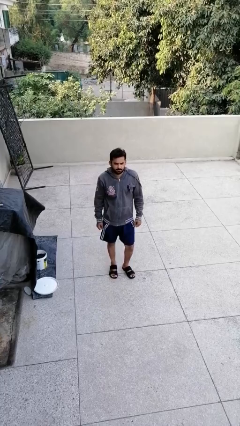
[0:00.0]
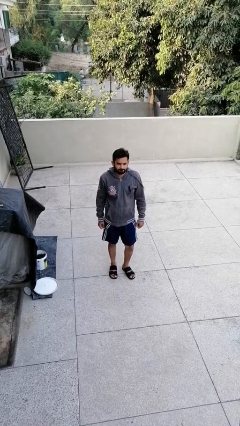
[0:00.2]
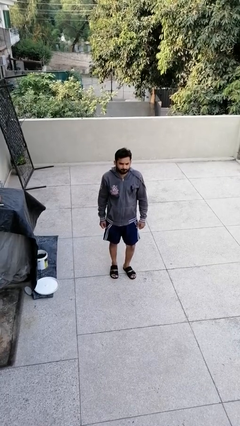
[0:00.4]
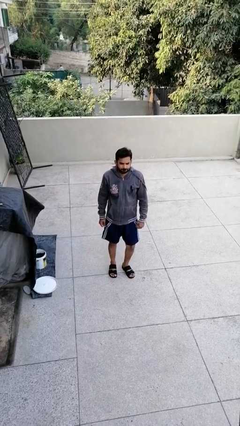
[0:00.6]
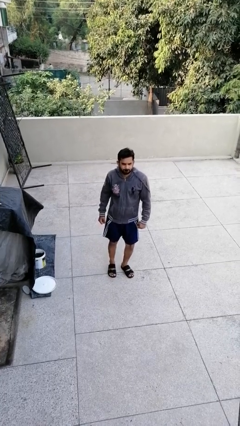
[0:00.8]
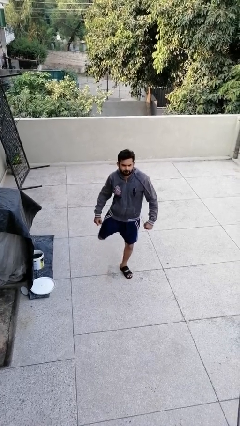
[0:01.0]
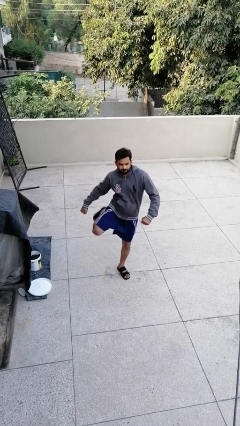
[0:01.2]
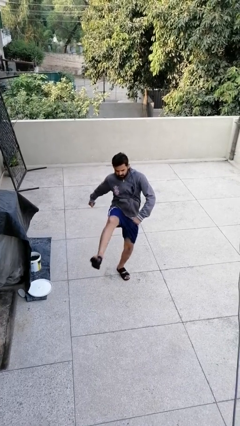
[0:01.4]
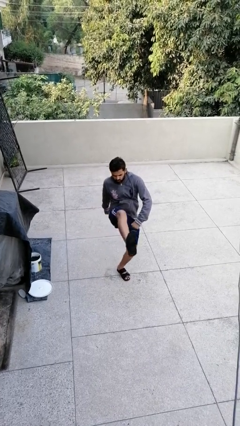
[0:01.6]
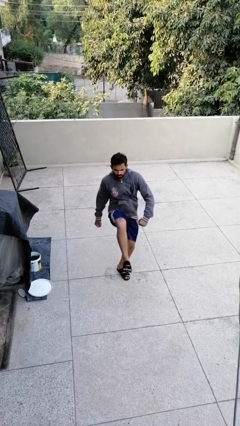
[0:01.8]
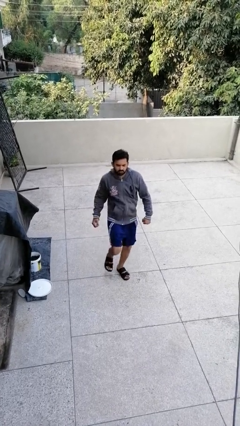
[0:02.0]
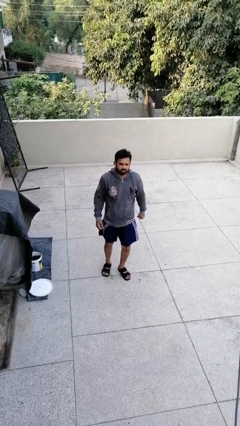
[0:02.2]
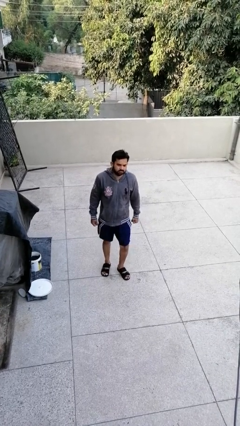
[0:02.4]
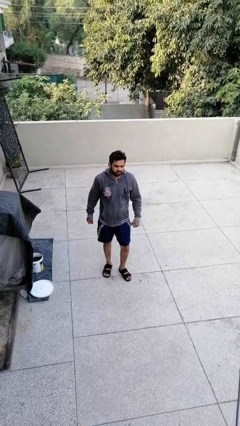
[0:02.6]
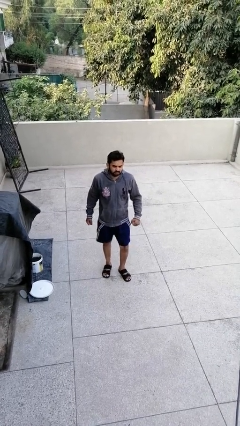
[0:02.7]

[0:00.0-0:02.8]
person karate kicks

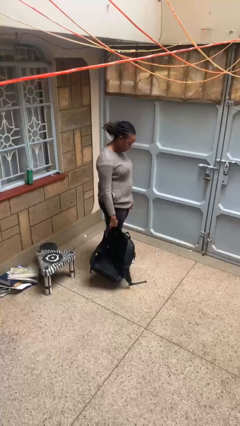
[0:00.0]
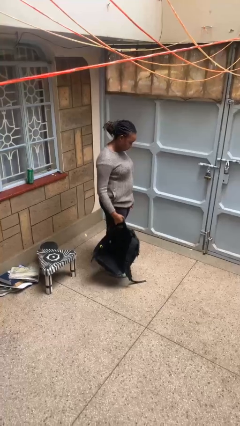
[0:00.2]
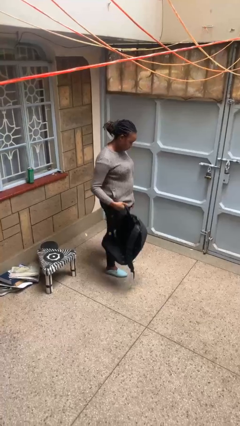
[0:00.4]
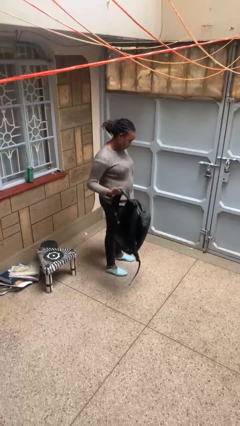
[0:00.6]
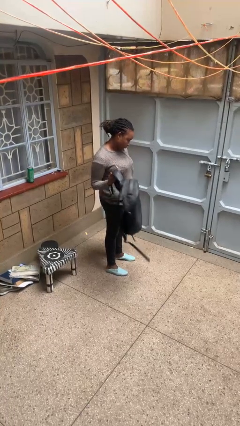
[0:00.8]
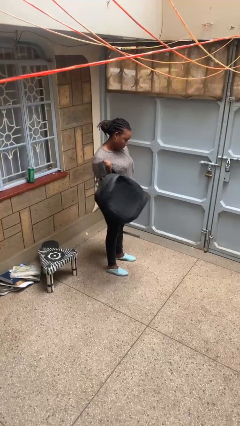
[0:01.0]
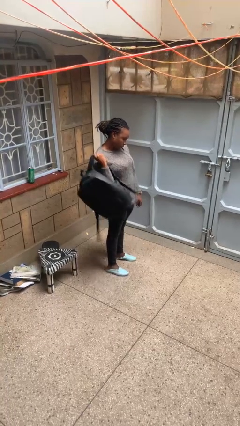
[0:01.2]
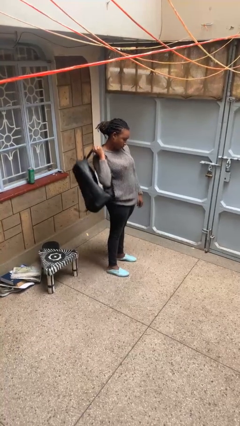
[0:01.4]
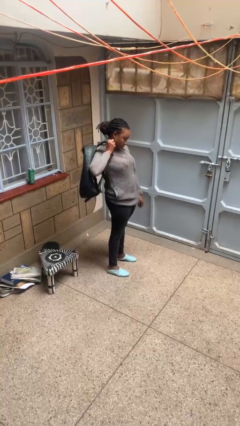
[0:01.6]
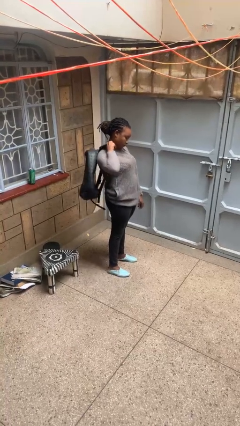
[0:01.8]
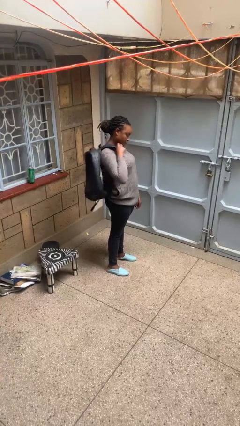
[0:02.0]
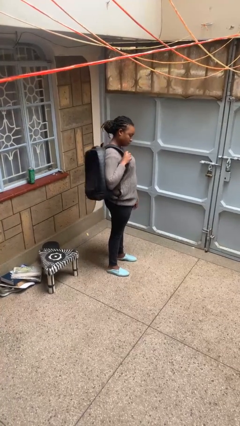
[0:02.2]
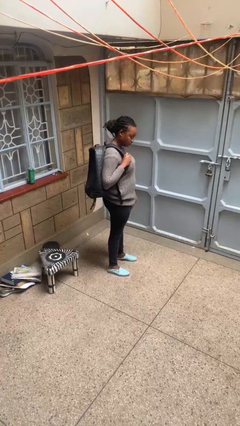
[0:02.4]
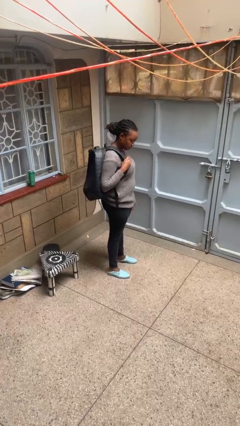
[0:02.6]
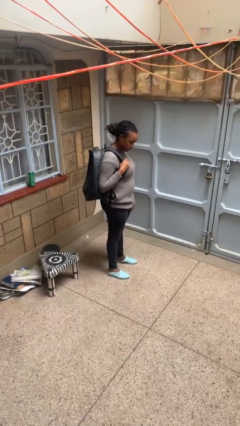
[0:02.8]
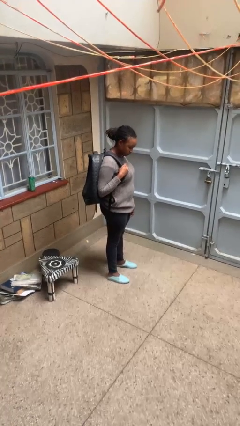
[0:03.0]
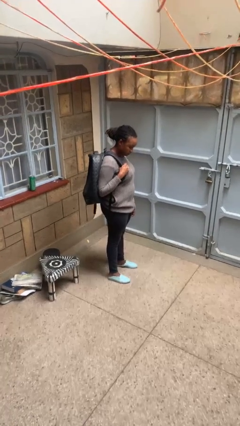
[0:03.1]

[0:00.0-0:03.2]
person puts on backpack

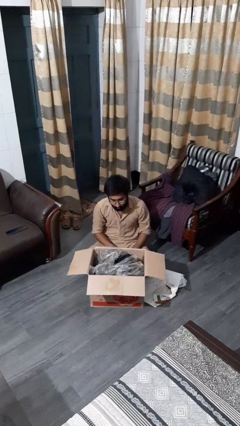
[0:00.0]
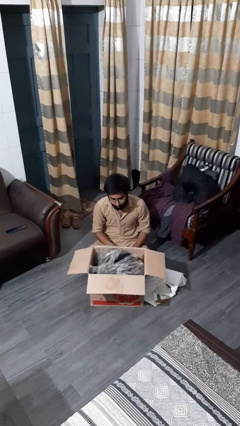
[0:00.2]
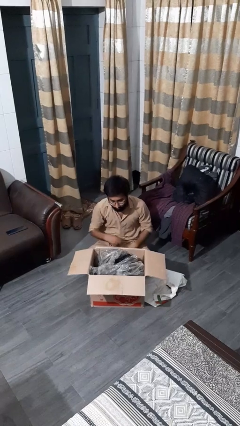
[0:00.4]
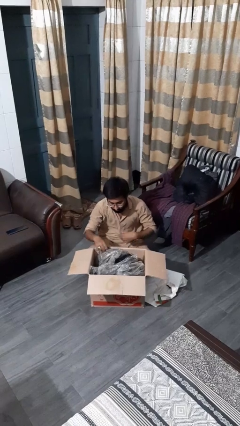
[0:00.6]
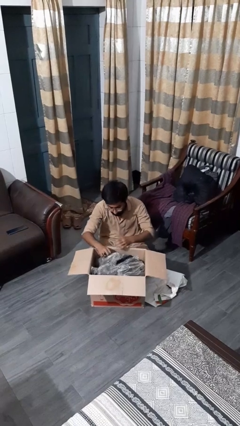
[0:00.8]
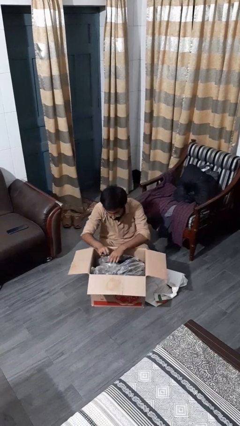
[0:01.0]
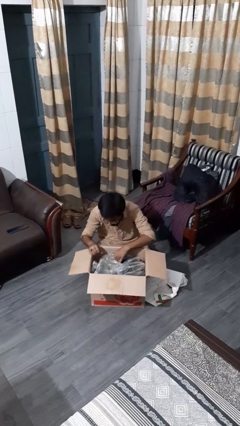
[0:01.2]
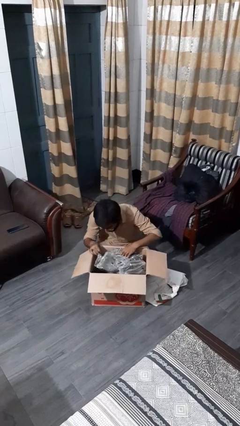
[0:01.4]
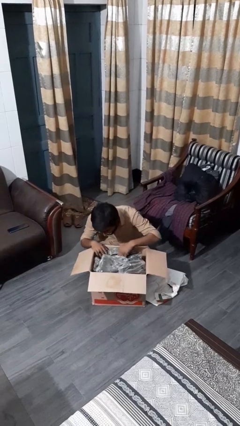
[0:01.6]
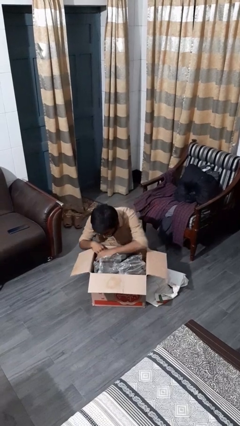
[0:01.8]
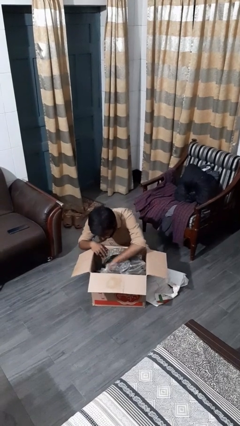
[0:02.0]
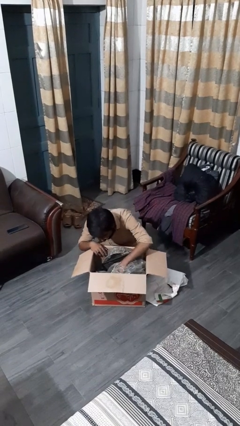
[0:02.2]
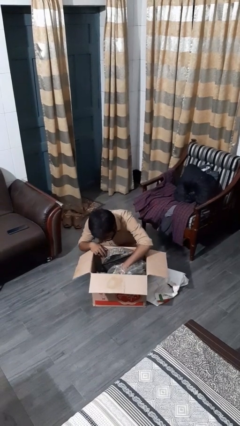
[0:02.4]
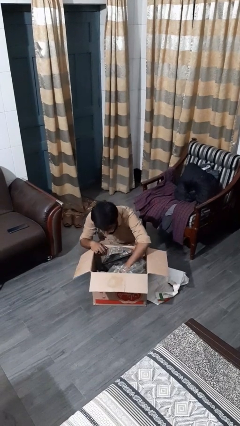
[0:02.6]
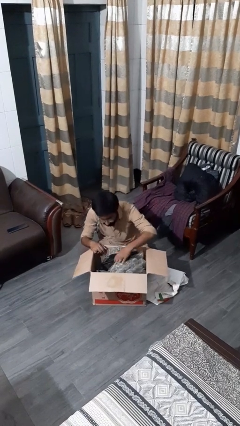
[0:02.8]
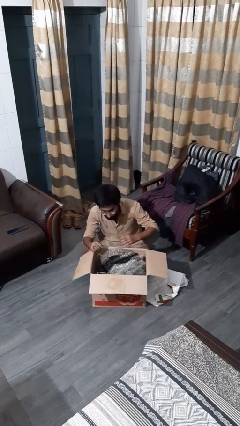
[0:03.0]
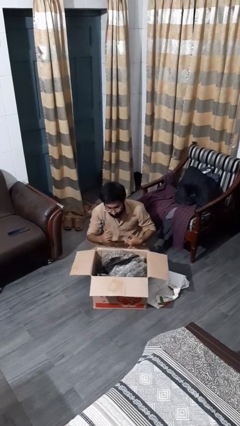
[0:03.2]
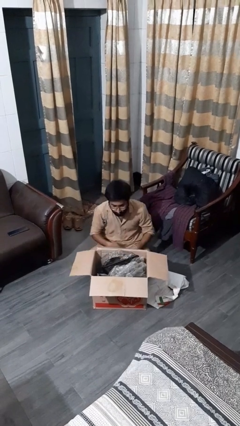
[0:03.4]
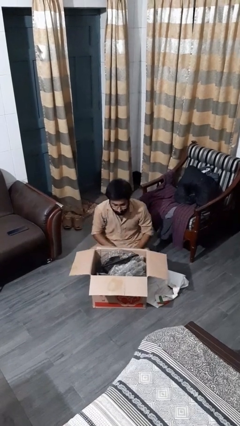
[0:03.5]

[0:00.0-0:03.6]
person searches in box

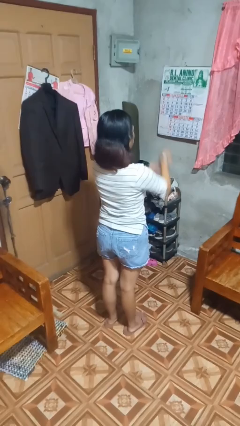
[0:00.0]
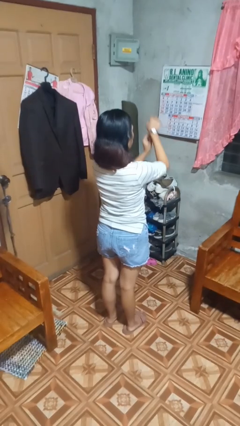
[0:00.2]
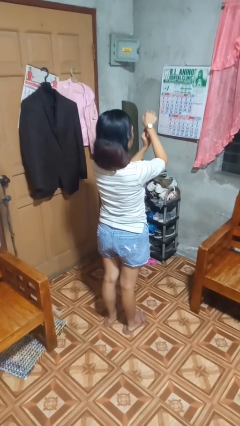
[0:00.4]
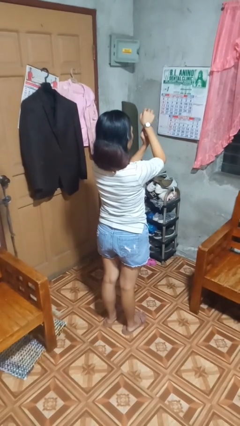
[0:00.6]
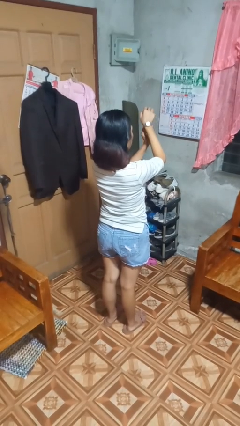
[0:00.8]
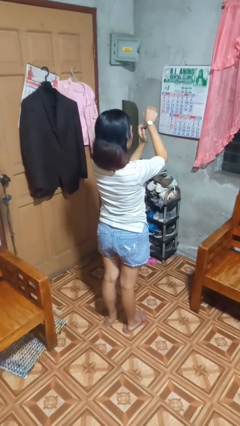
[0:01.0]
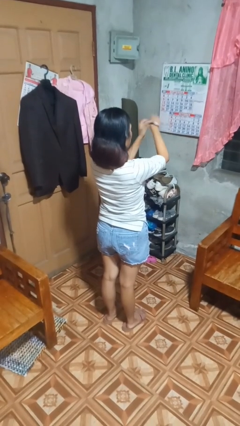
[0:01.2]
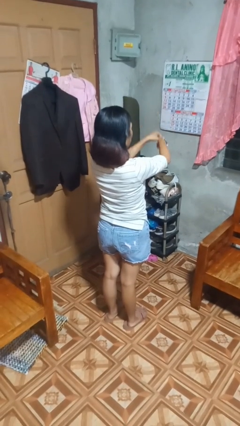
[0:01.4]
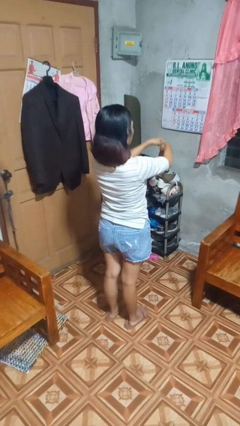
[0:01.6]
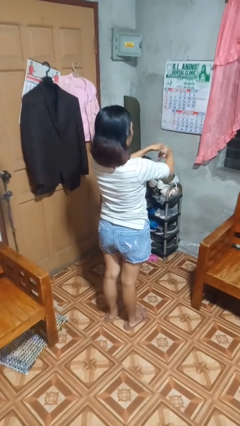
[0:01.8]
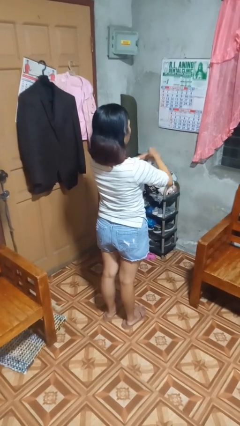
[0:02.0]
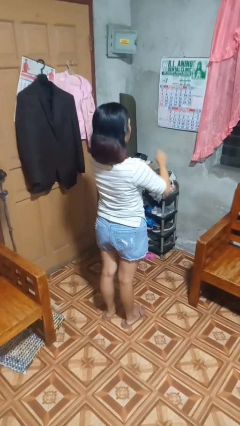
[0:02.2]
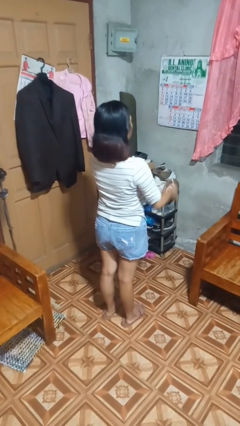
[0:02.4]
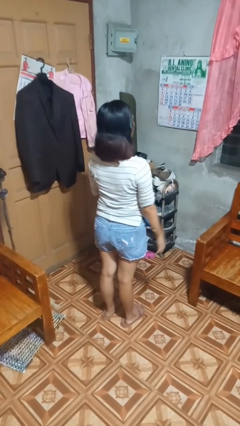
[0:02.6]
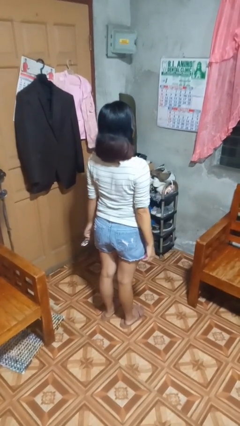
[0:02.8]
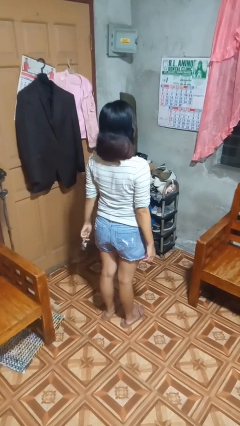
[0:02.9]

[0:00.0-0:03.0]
person takes off wristwatch

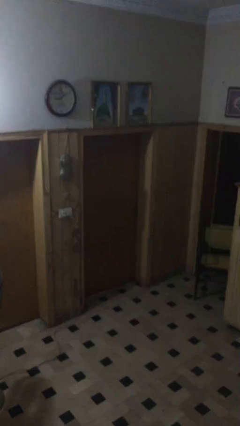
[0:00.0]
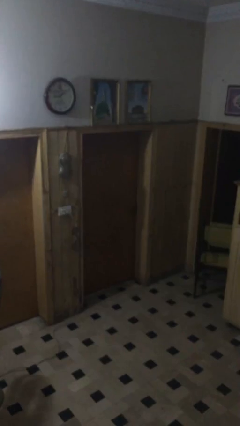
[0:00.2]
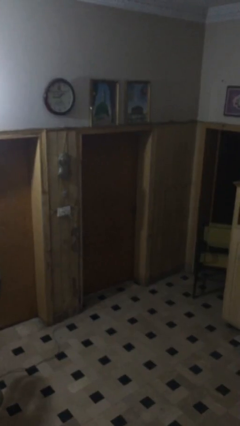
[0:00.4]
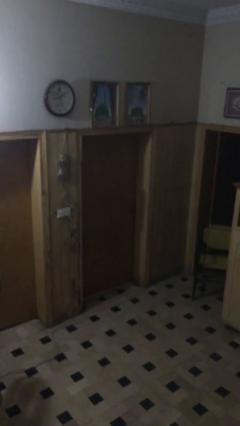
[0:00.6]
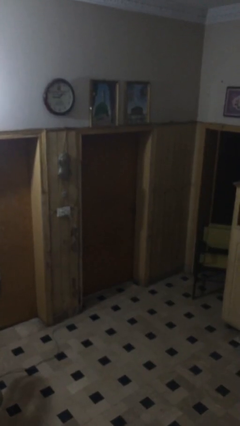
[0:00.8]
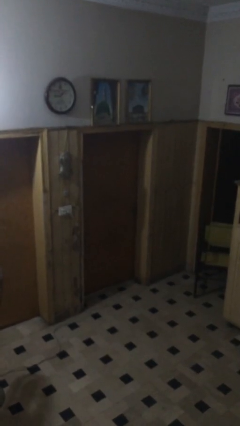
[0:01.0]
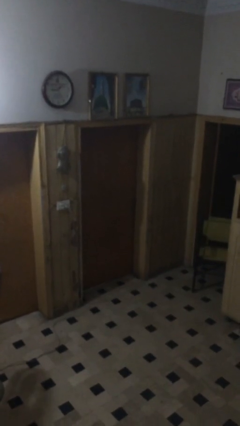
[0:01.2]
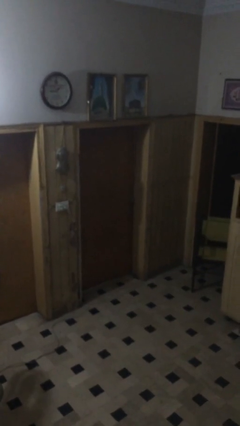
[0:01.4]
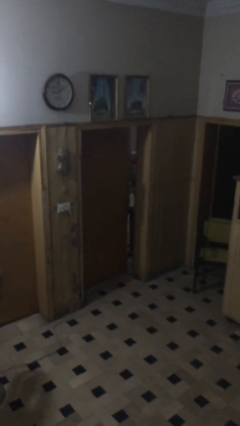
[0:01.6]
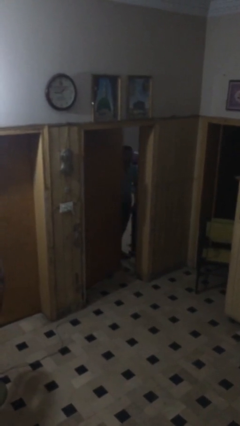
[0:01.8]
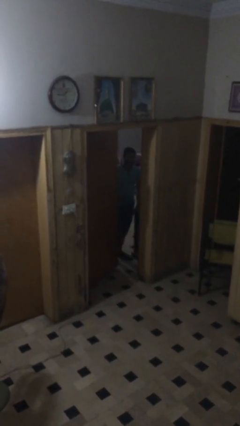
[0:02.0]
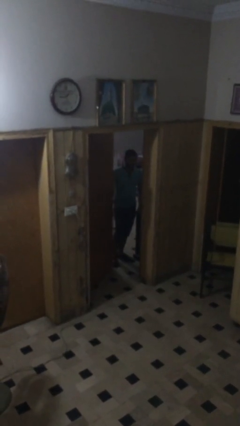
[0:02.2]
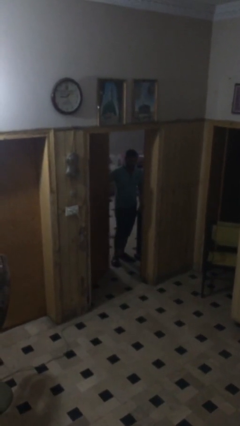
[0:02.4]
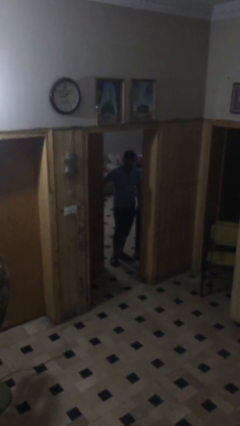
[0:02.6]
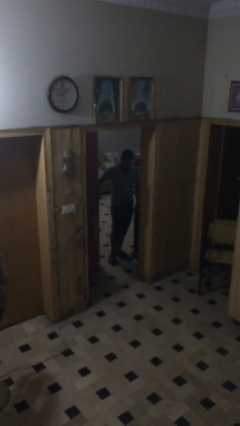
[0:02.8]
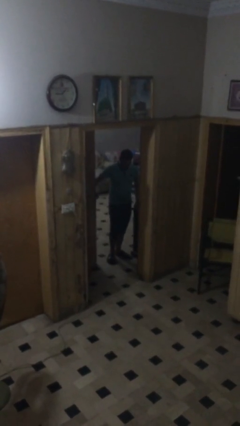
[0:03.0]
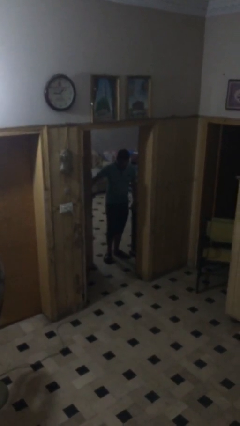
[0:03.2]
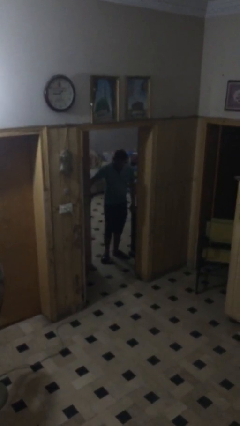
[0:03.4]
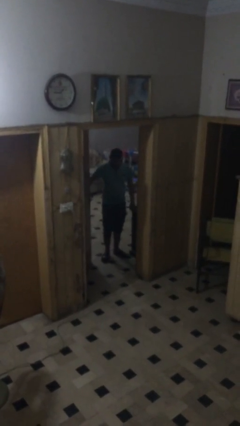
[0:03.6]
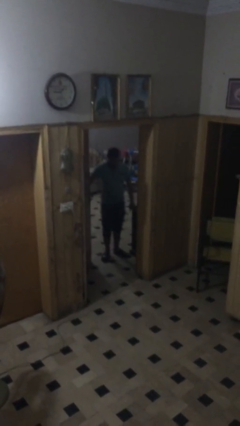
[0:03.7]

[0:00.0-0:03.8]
person opens facility door

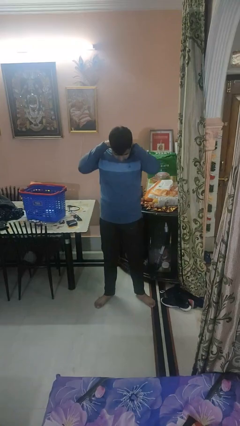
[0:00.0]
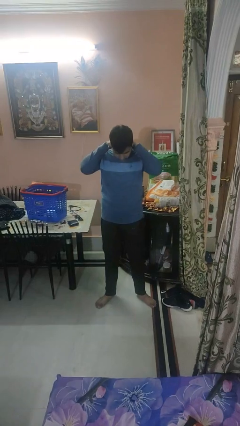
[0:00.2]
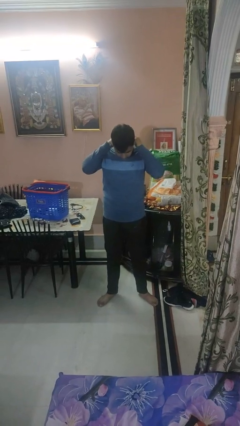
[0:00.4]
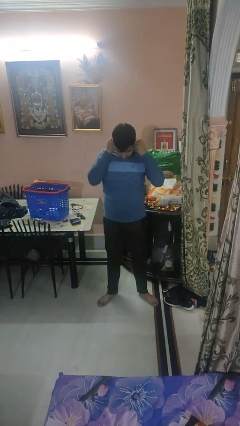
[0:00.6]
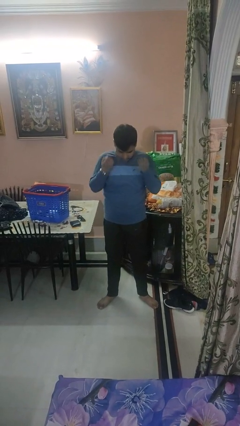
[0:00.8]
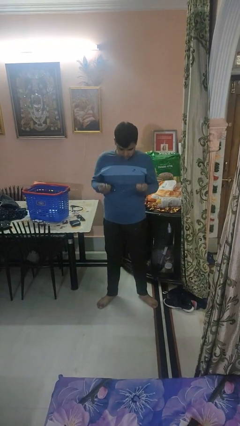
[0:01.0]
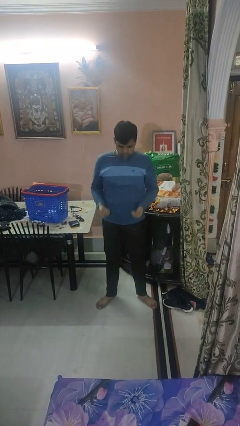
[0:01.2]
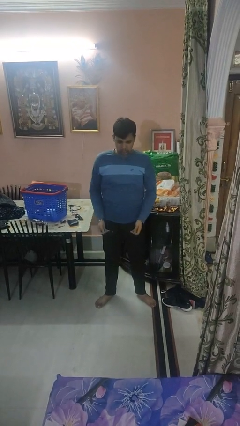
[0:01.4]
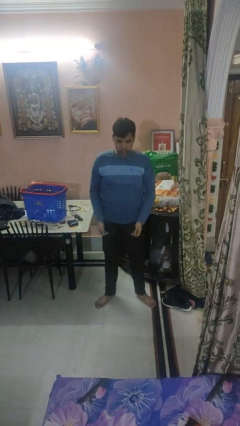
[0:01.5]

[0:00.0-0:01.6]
person takes off necklace
